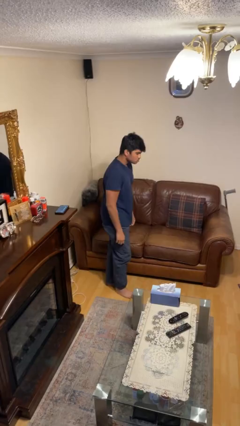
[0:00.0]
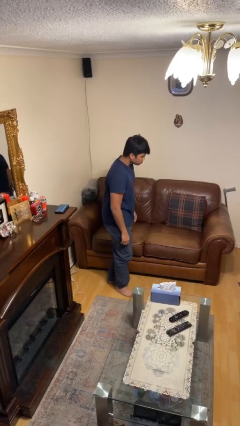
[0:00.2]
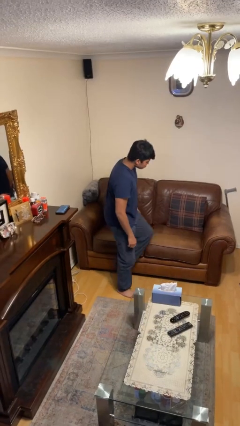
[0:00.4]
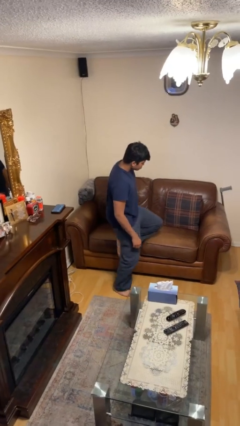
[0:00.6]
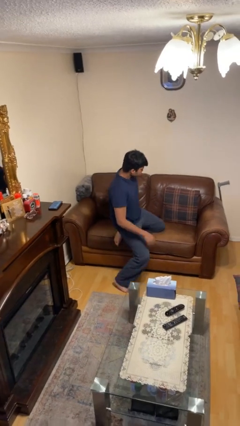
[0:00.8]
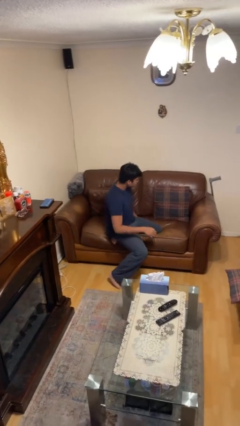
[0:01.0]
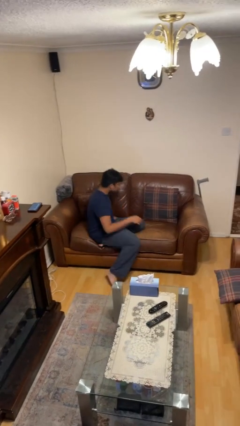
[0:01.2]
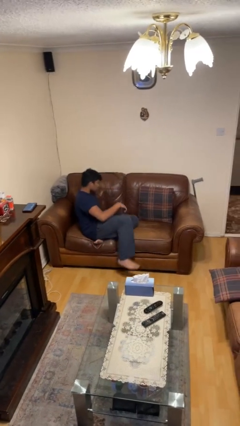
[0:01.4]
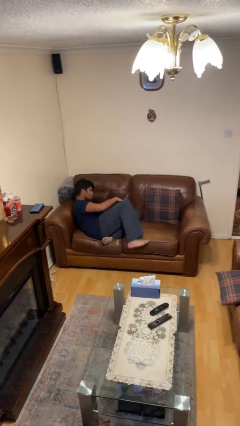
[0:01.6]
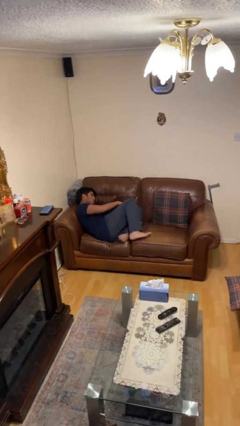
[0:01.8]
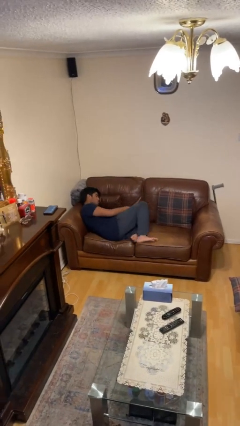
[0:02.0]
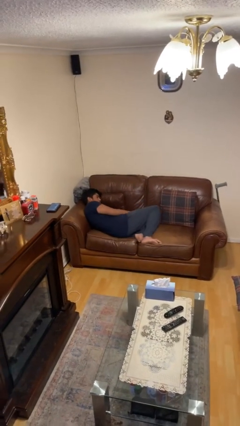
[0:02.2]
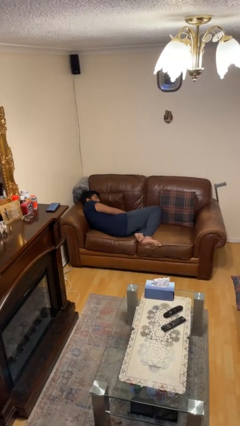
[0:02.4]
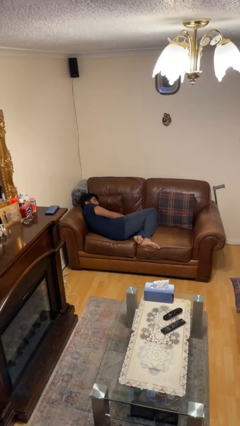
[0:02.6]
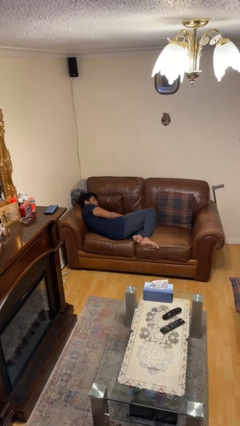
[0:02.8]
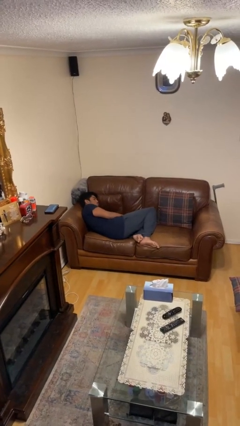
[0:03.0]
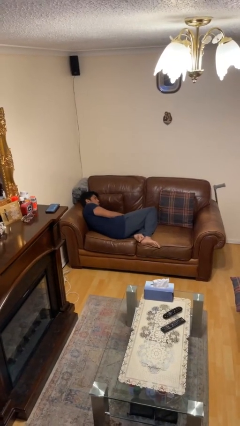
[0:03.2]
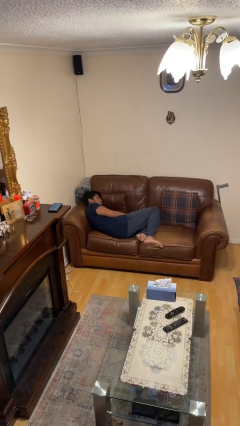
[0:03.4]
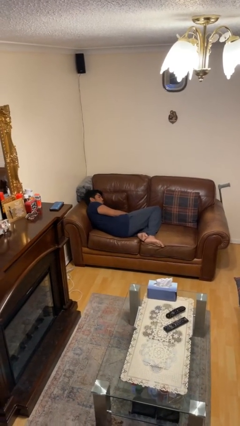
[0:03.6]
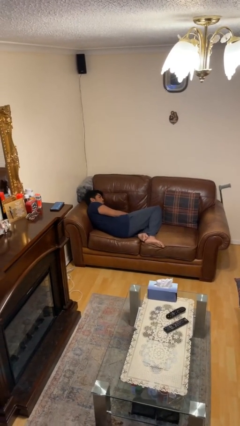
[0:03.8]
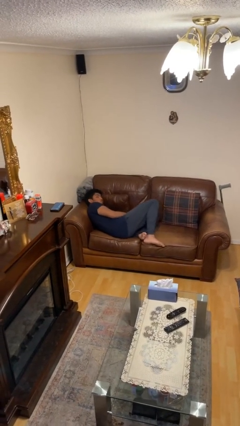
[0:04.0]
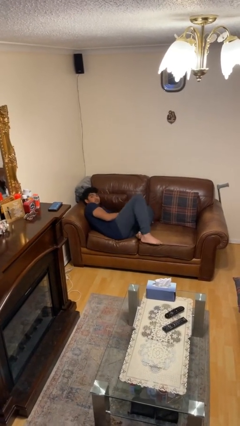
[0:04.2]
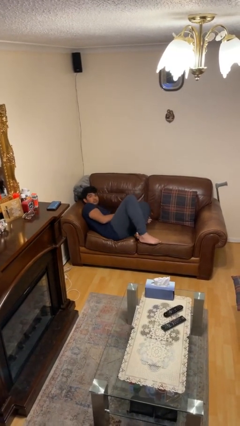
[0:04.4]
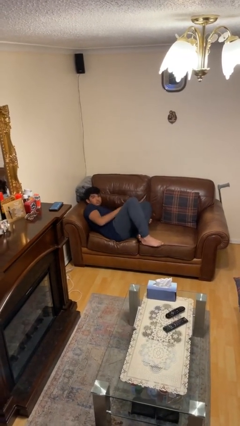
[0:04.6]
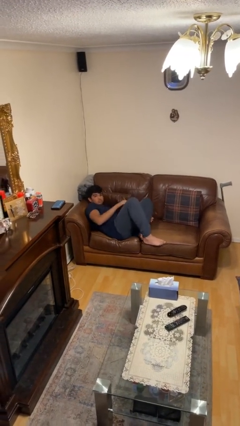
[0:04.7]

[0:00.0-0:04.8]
person lies down on couch

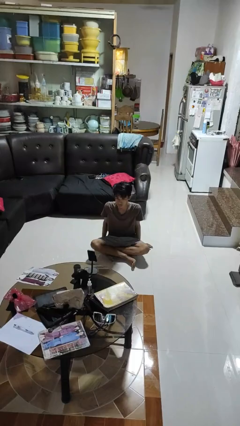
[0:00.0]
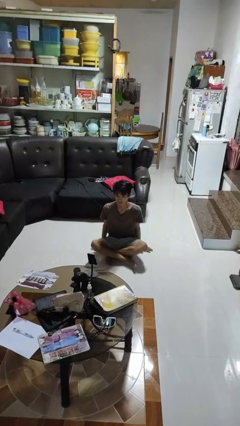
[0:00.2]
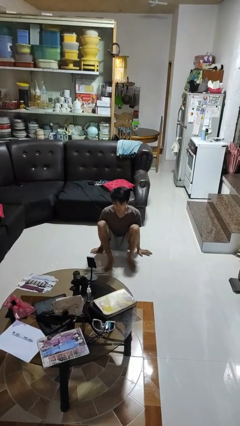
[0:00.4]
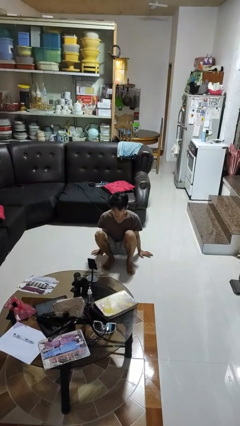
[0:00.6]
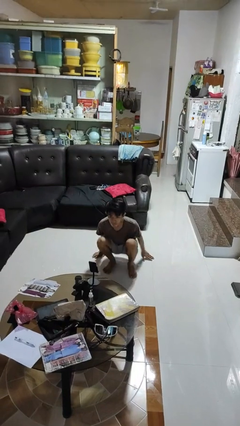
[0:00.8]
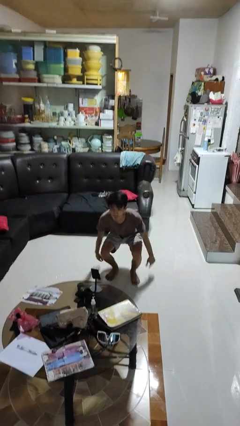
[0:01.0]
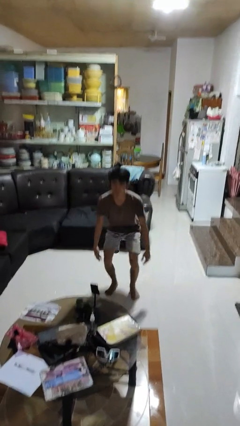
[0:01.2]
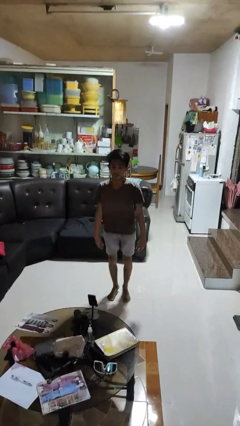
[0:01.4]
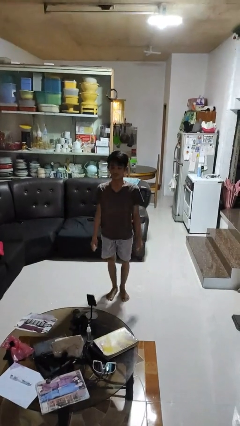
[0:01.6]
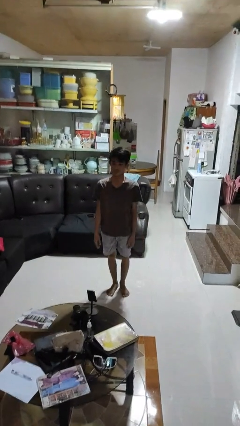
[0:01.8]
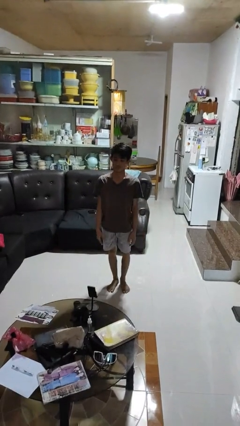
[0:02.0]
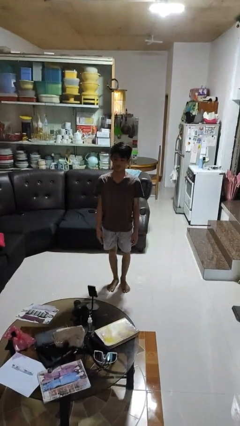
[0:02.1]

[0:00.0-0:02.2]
person stands up from floor

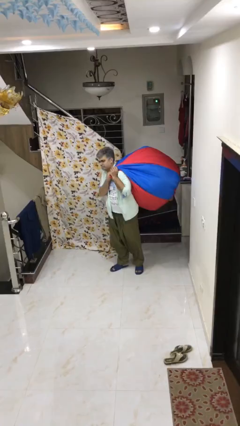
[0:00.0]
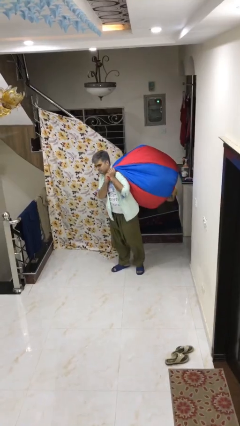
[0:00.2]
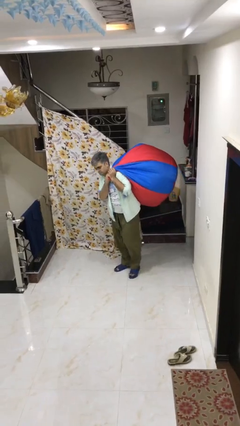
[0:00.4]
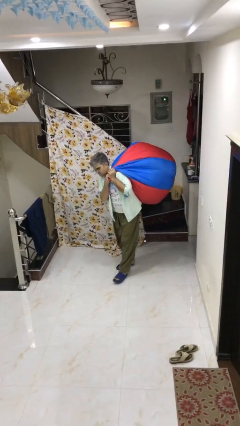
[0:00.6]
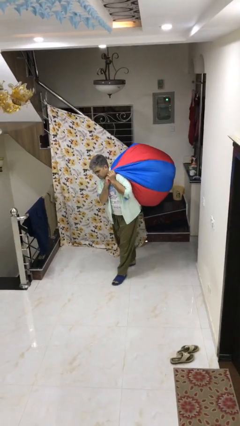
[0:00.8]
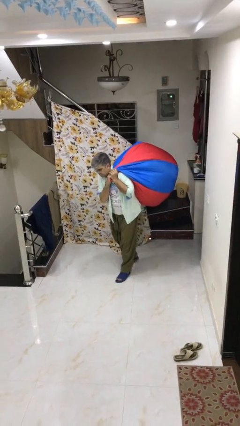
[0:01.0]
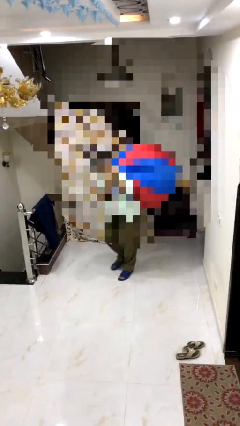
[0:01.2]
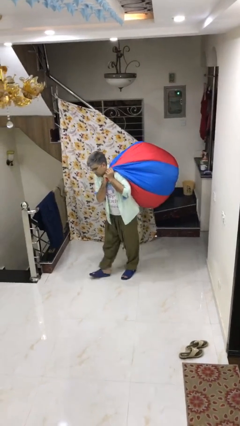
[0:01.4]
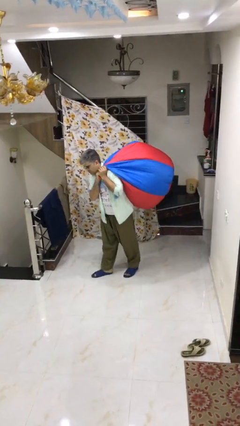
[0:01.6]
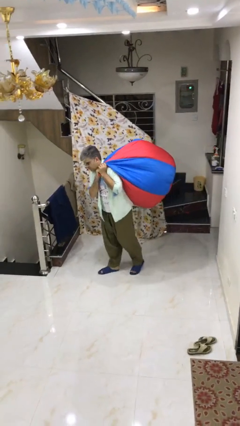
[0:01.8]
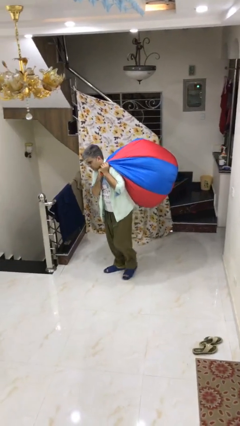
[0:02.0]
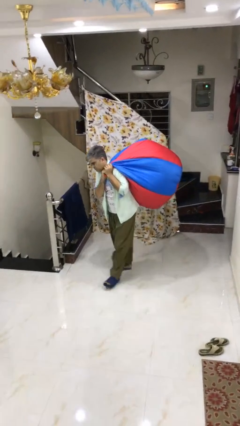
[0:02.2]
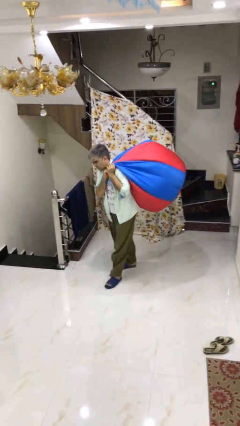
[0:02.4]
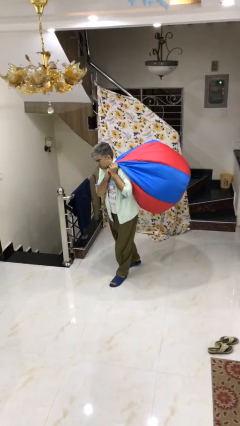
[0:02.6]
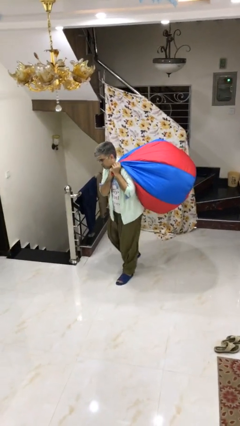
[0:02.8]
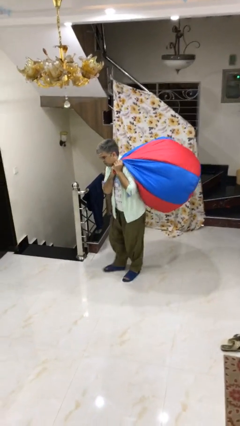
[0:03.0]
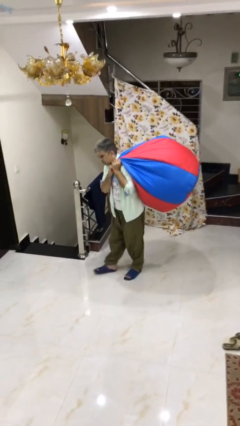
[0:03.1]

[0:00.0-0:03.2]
person carries heavy object

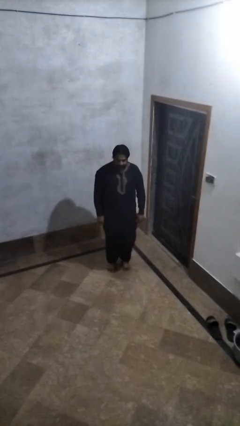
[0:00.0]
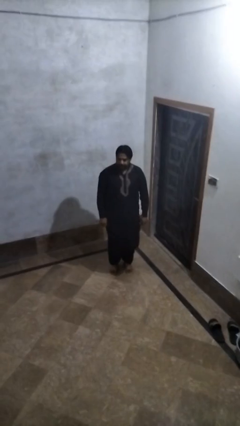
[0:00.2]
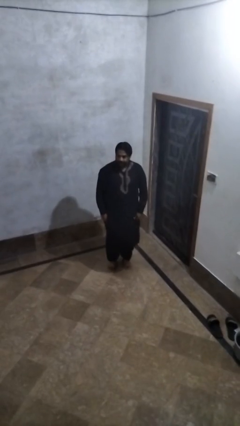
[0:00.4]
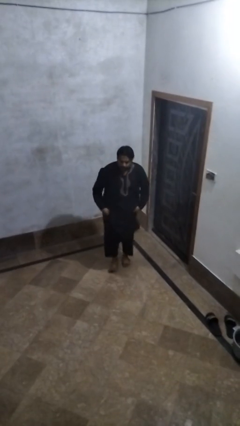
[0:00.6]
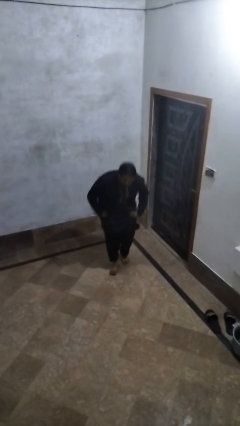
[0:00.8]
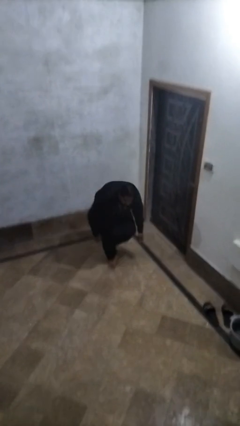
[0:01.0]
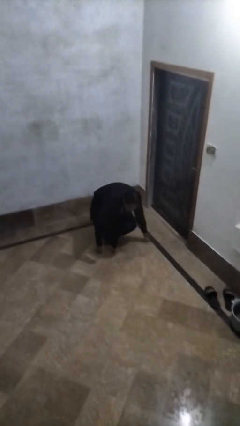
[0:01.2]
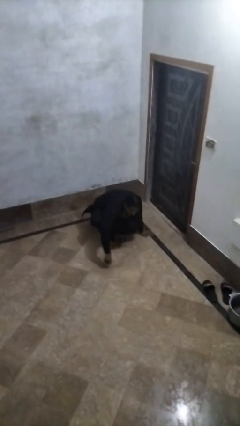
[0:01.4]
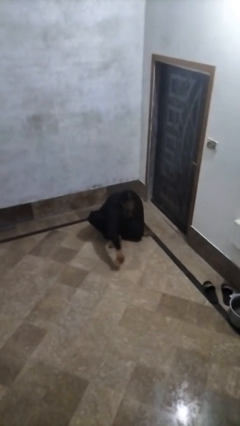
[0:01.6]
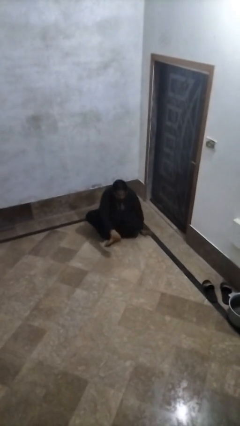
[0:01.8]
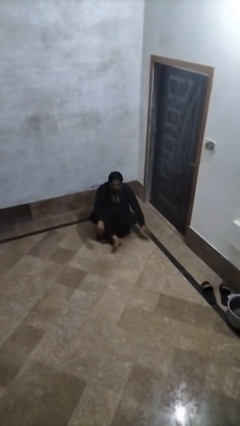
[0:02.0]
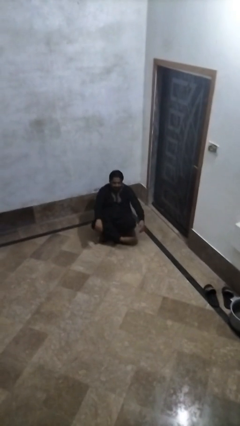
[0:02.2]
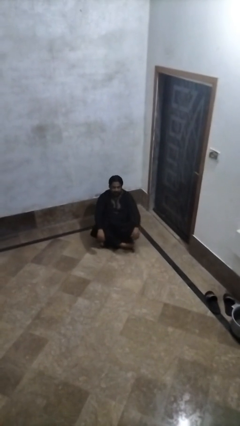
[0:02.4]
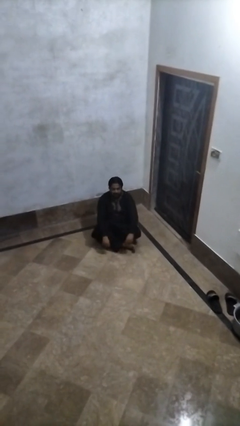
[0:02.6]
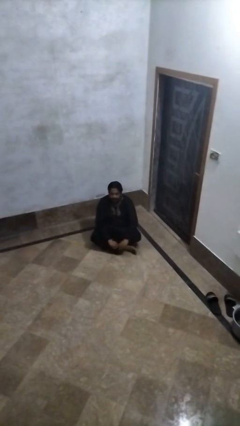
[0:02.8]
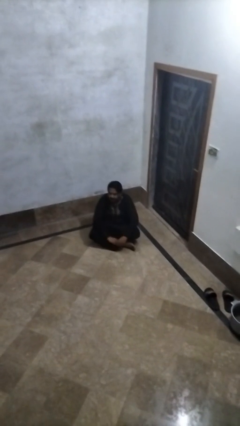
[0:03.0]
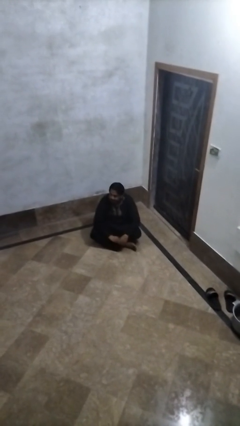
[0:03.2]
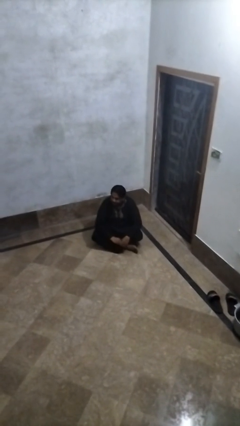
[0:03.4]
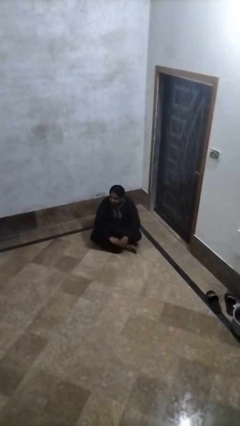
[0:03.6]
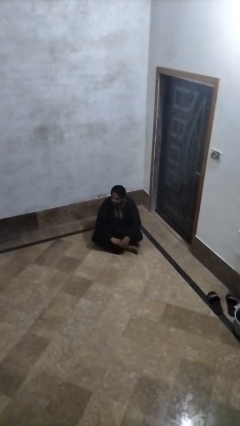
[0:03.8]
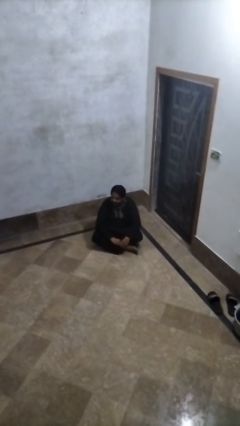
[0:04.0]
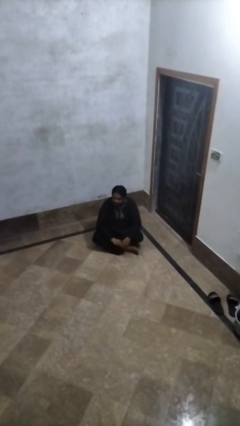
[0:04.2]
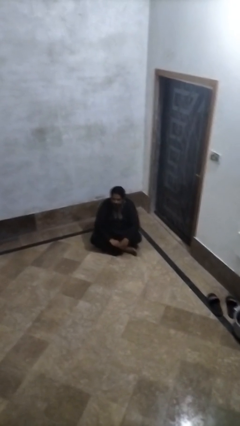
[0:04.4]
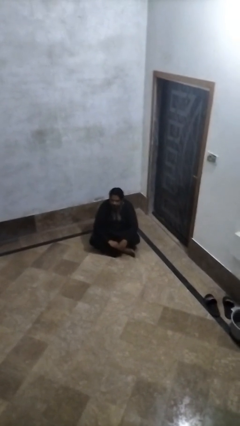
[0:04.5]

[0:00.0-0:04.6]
person sits crisscross

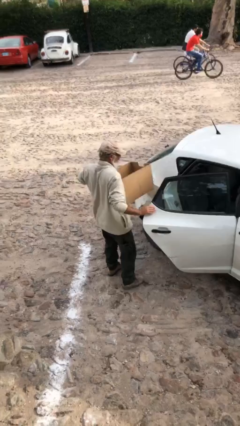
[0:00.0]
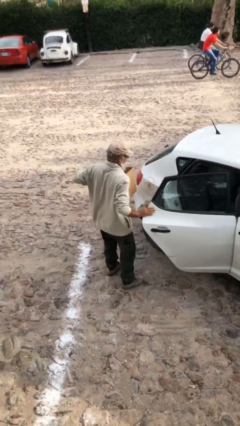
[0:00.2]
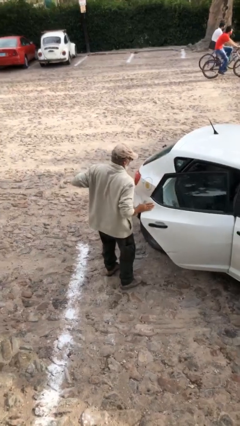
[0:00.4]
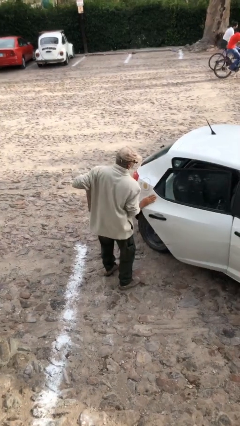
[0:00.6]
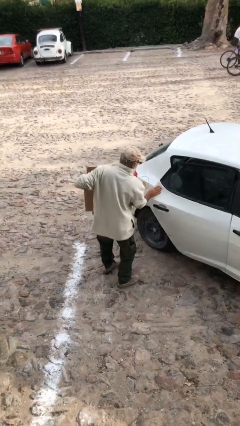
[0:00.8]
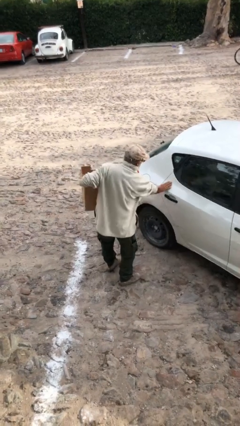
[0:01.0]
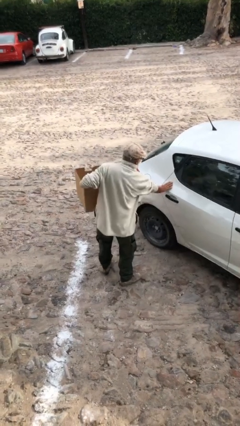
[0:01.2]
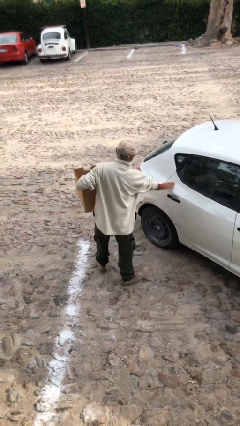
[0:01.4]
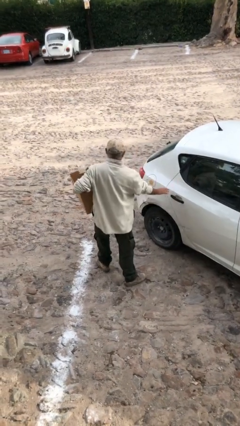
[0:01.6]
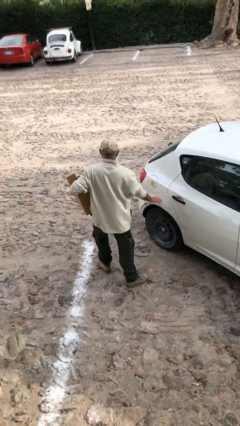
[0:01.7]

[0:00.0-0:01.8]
person closes car door

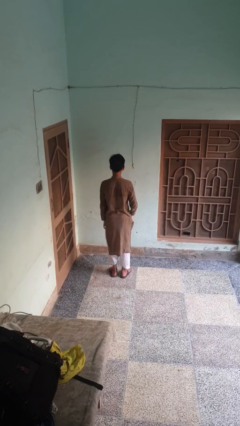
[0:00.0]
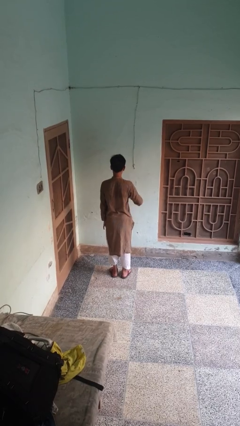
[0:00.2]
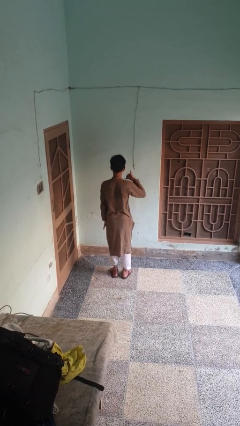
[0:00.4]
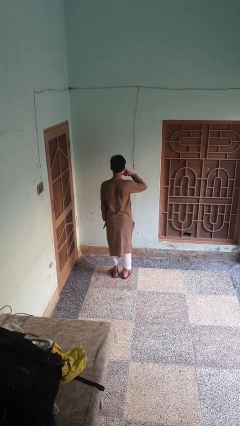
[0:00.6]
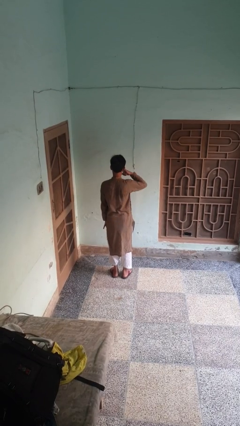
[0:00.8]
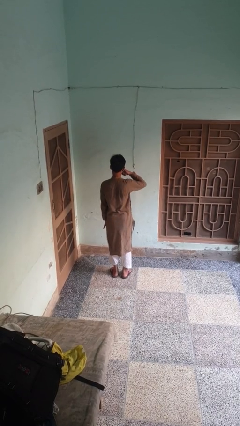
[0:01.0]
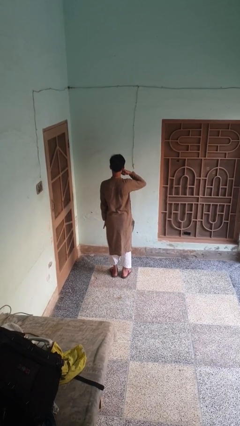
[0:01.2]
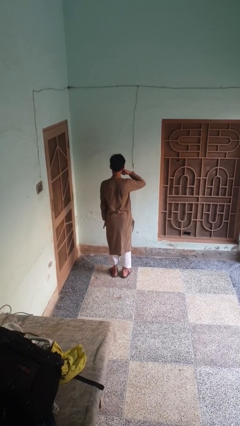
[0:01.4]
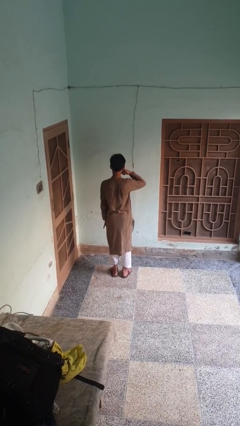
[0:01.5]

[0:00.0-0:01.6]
person gestures call me
